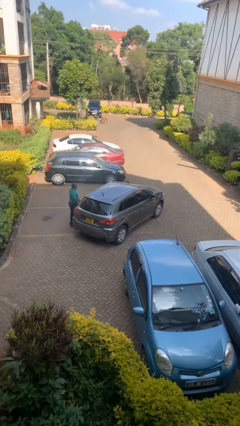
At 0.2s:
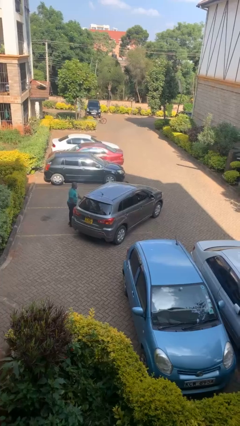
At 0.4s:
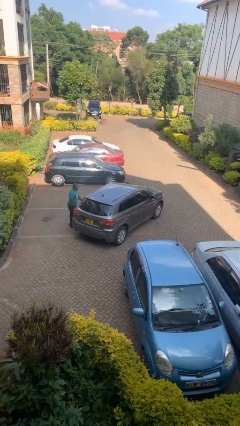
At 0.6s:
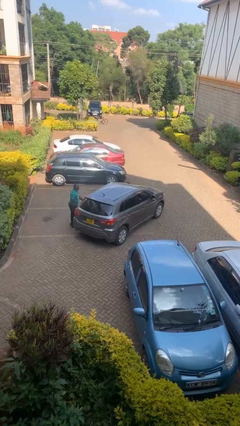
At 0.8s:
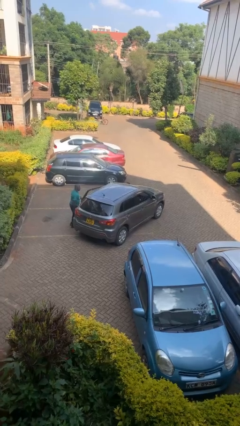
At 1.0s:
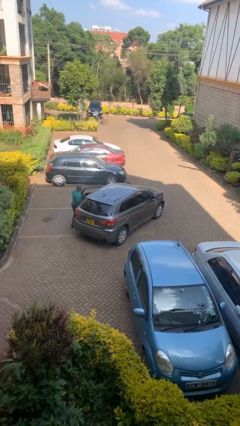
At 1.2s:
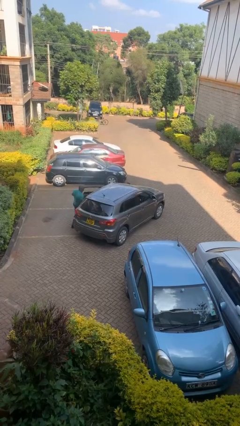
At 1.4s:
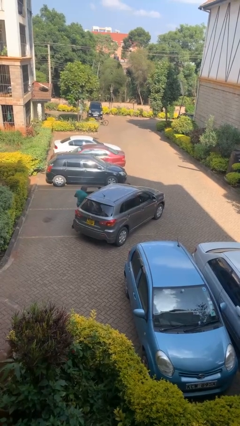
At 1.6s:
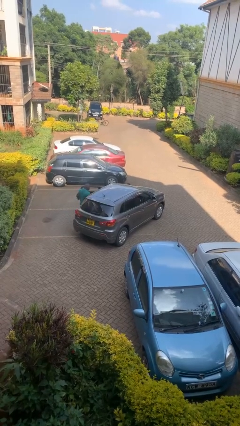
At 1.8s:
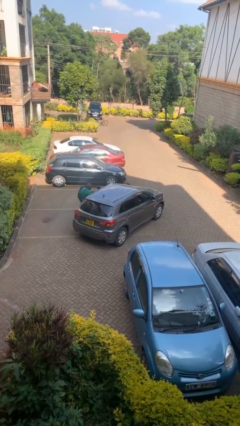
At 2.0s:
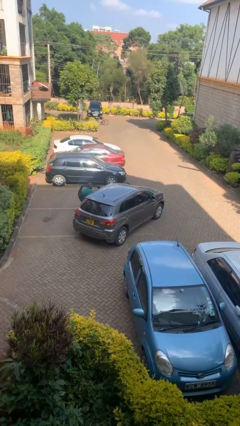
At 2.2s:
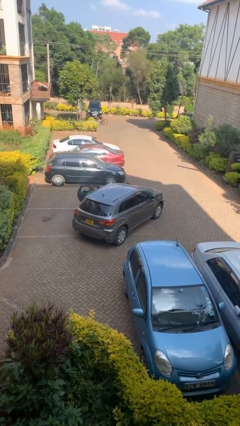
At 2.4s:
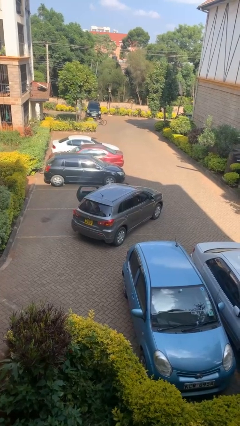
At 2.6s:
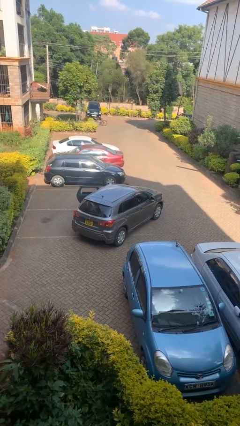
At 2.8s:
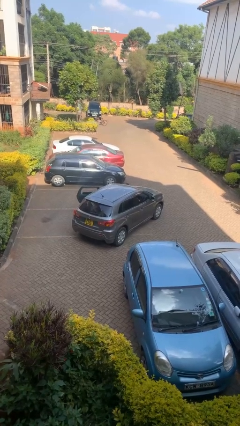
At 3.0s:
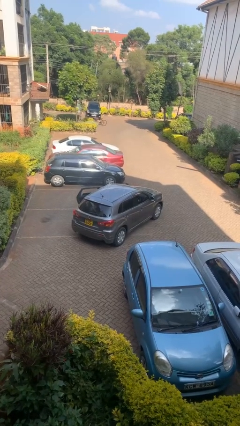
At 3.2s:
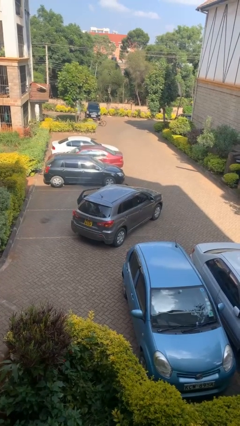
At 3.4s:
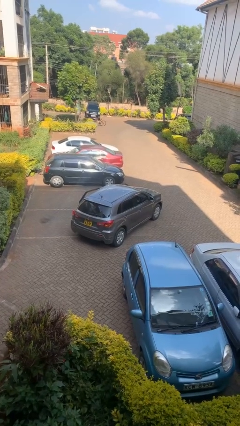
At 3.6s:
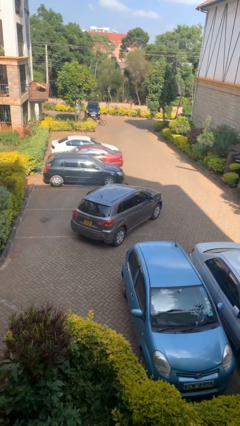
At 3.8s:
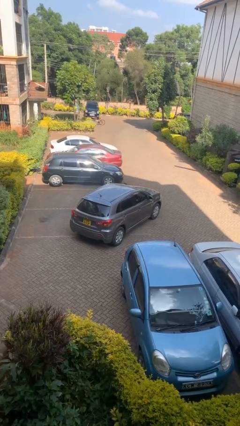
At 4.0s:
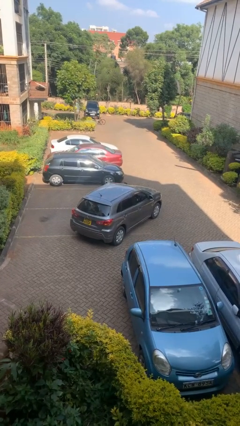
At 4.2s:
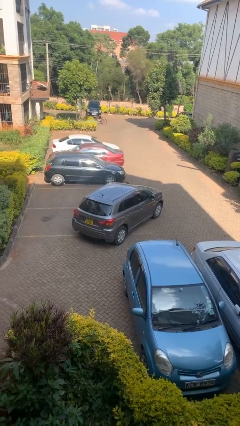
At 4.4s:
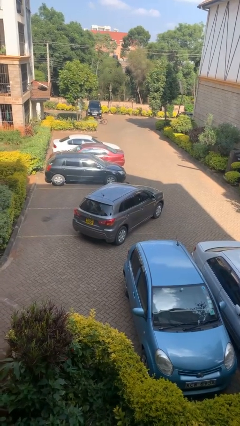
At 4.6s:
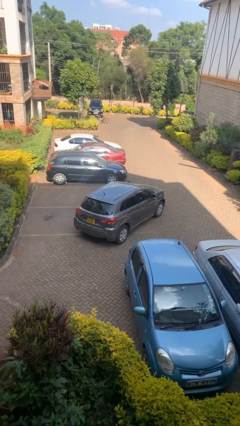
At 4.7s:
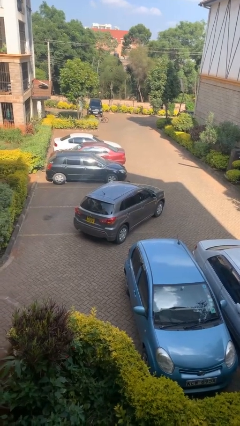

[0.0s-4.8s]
car picks up person

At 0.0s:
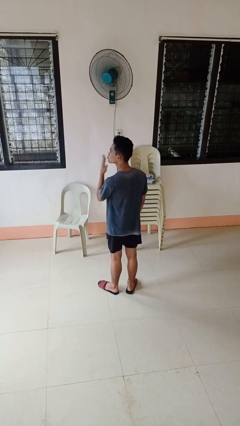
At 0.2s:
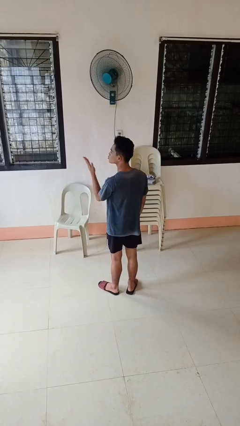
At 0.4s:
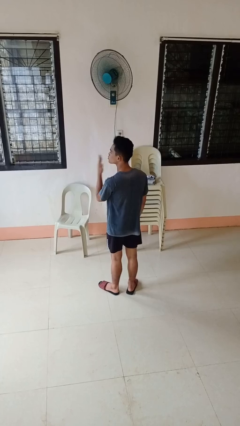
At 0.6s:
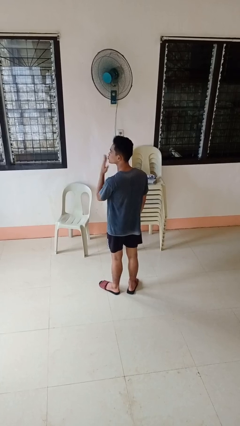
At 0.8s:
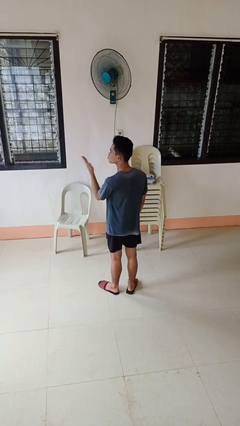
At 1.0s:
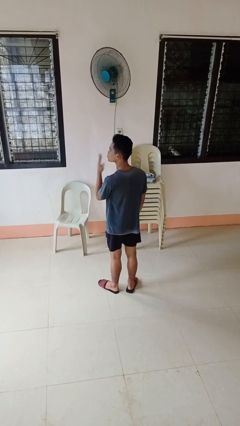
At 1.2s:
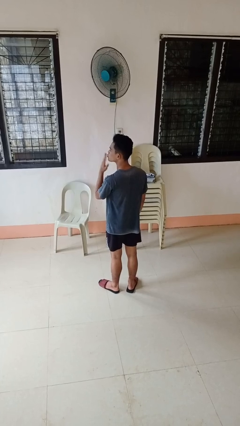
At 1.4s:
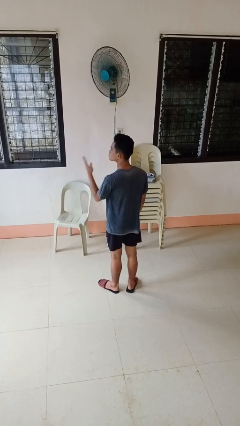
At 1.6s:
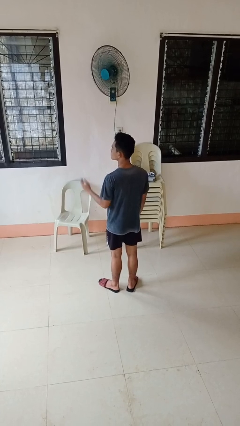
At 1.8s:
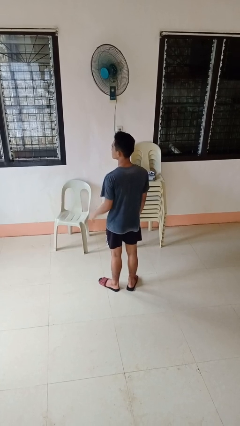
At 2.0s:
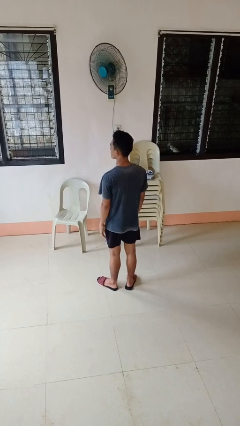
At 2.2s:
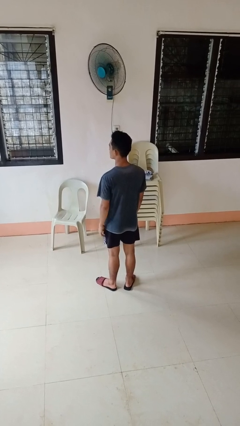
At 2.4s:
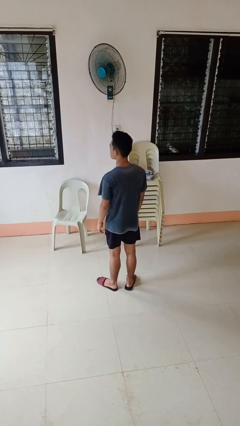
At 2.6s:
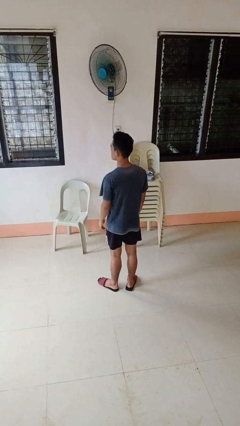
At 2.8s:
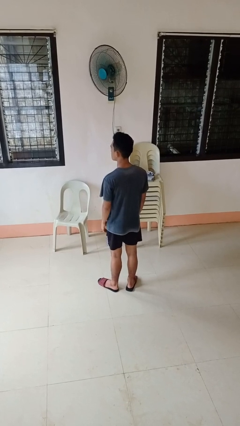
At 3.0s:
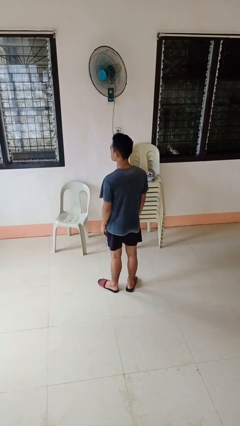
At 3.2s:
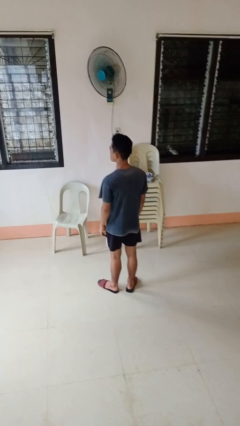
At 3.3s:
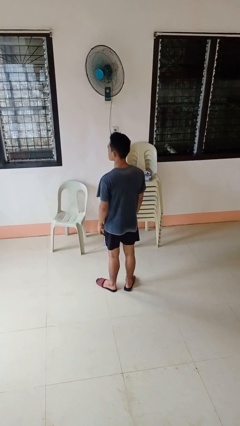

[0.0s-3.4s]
person gestures blow kiss

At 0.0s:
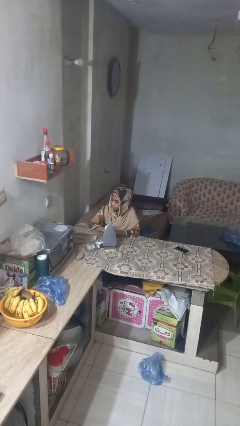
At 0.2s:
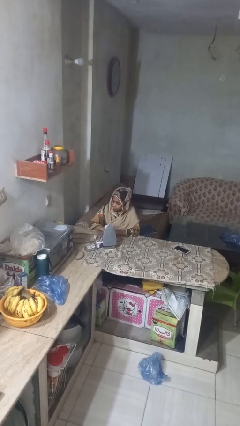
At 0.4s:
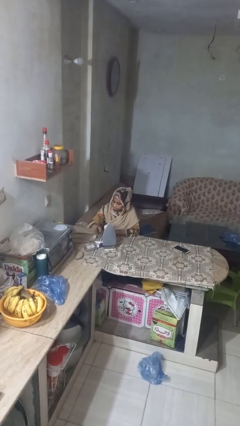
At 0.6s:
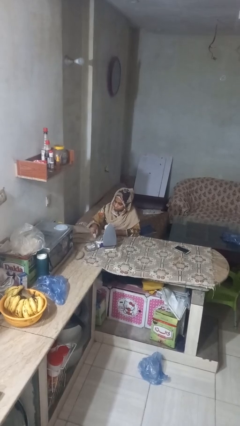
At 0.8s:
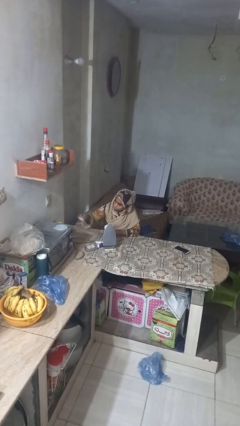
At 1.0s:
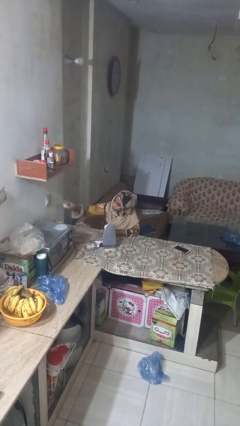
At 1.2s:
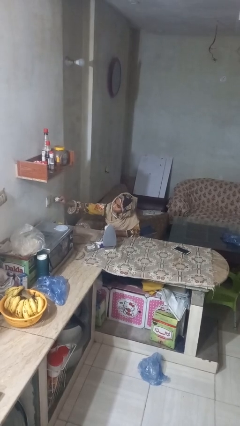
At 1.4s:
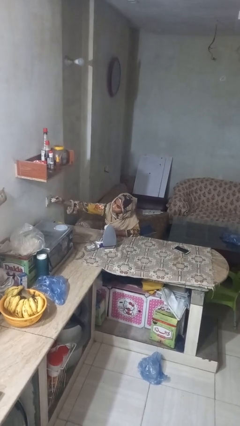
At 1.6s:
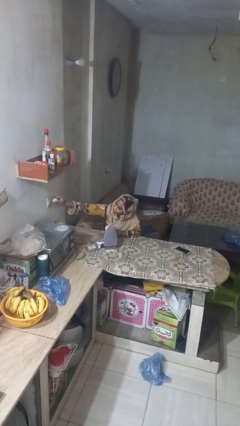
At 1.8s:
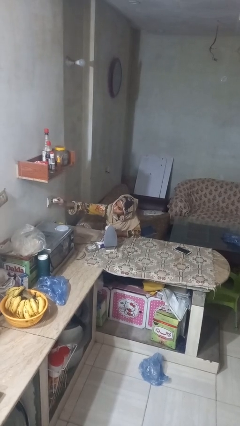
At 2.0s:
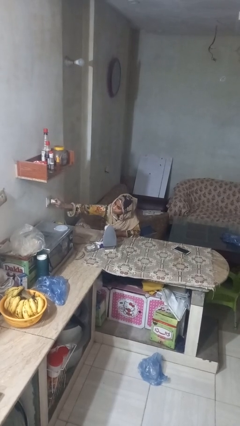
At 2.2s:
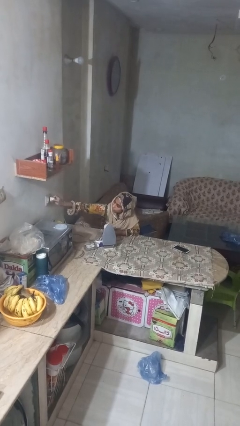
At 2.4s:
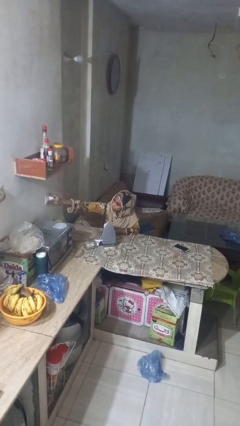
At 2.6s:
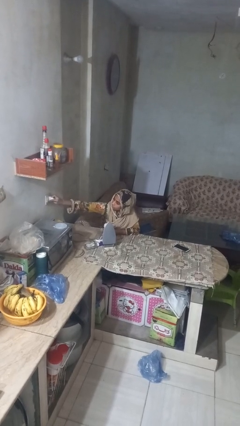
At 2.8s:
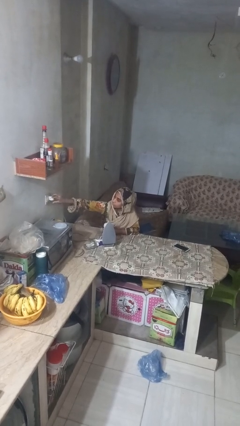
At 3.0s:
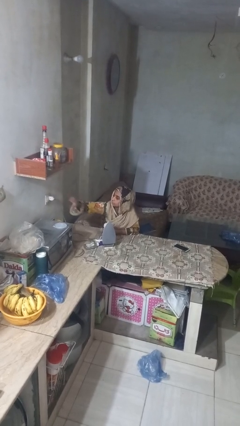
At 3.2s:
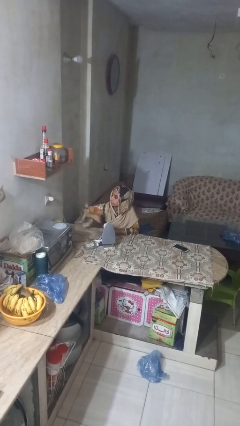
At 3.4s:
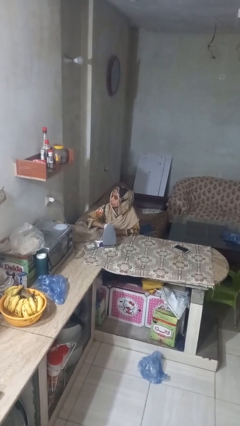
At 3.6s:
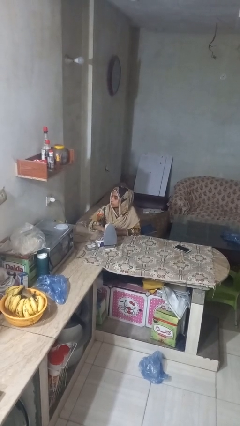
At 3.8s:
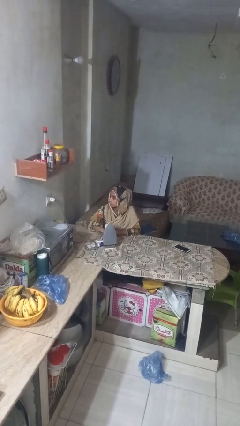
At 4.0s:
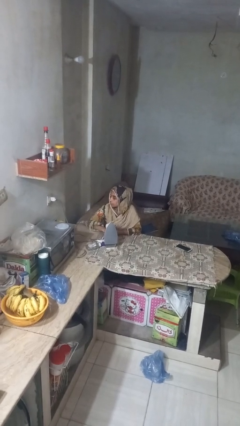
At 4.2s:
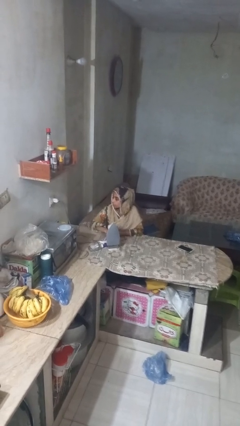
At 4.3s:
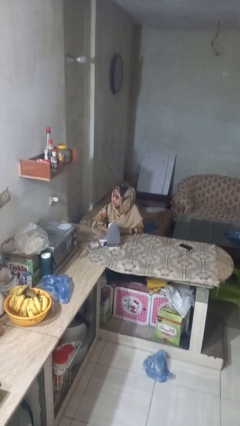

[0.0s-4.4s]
person plugs into electrical socket

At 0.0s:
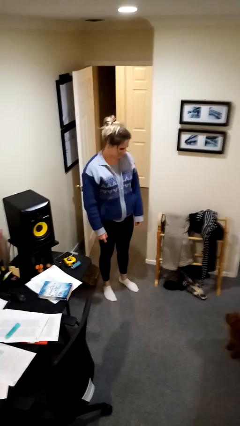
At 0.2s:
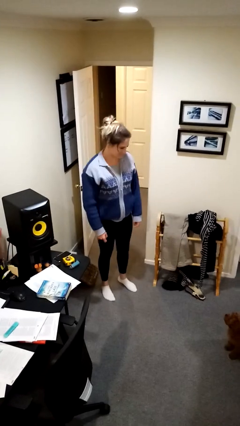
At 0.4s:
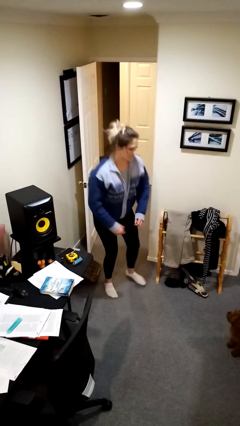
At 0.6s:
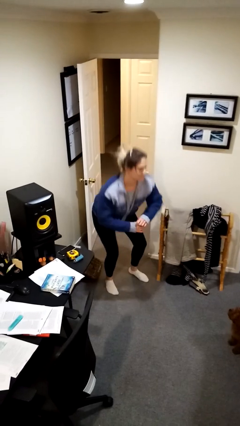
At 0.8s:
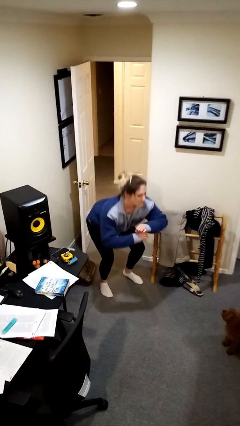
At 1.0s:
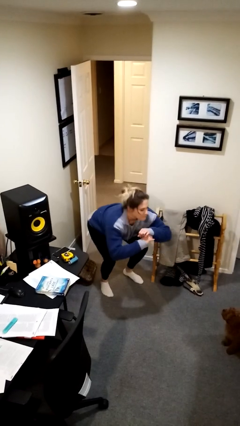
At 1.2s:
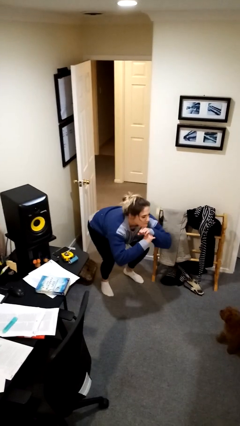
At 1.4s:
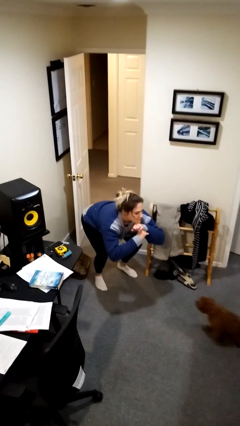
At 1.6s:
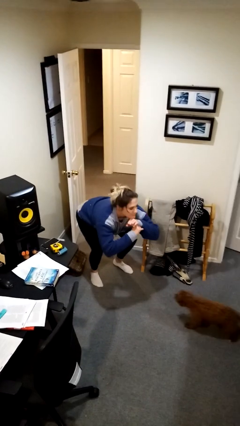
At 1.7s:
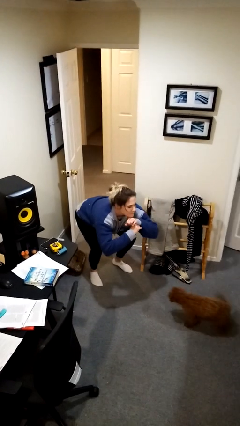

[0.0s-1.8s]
person squats

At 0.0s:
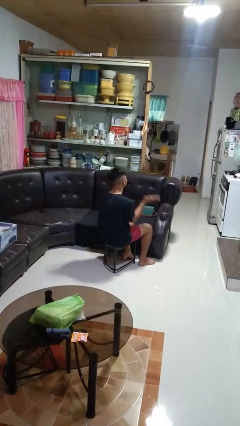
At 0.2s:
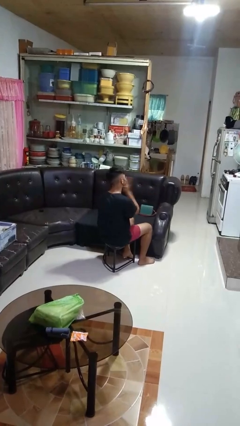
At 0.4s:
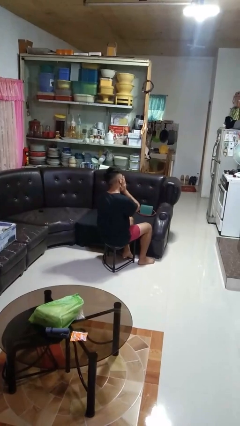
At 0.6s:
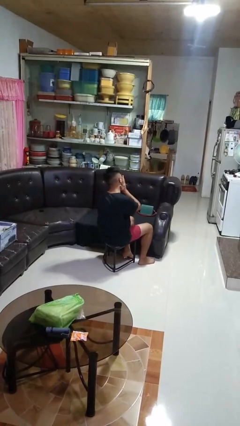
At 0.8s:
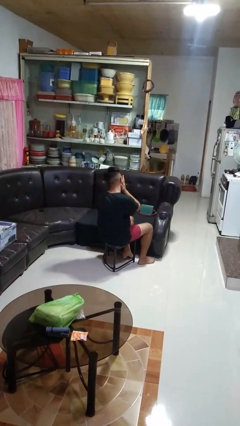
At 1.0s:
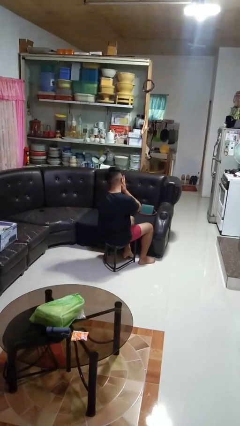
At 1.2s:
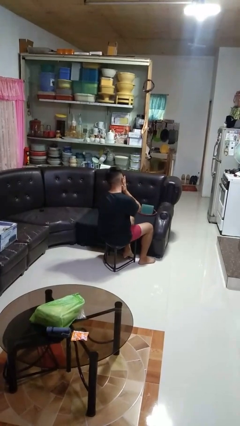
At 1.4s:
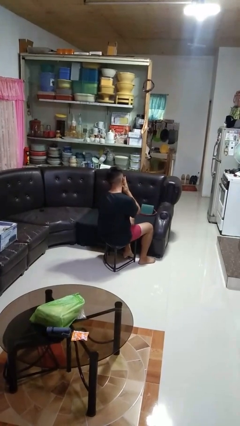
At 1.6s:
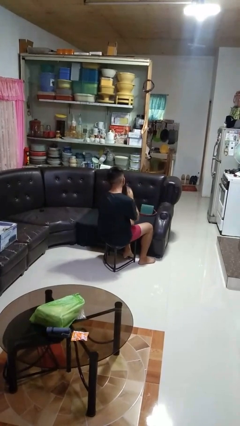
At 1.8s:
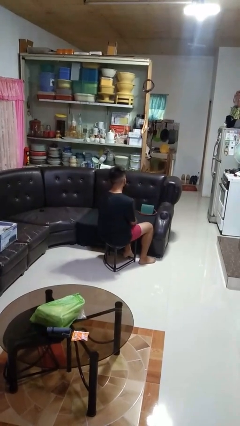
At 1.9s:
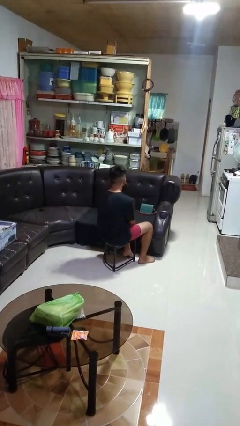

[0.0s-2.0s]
person swats bug

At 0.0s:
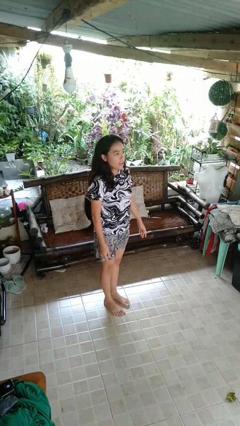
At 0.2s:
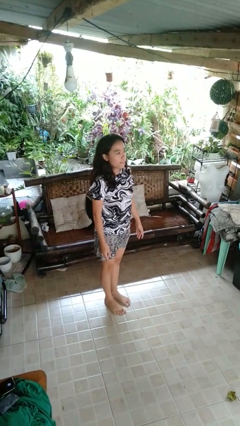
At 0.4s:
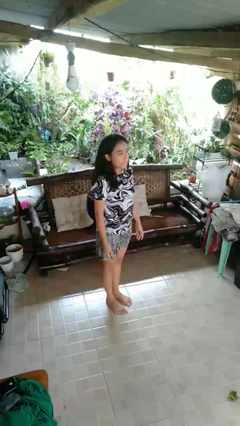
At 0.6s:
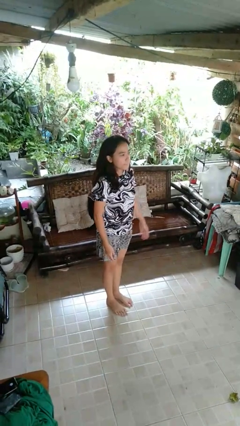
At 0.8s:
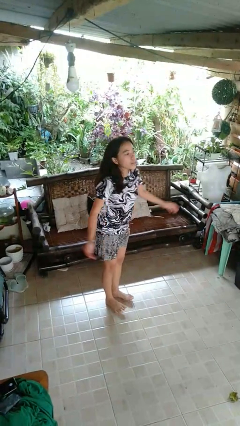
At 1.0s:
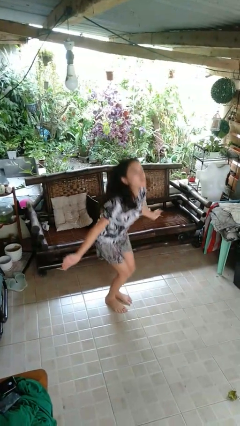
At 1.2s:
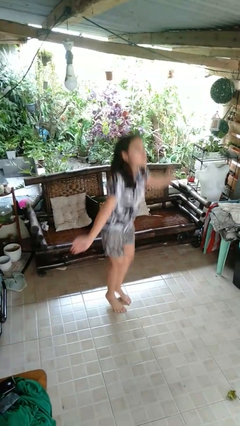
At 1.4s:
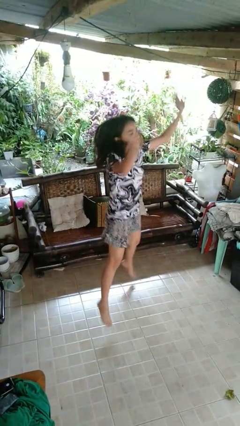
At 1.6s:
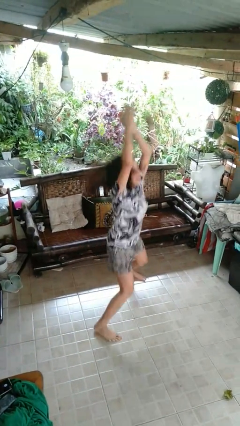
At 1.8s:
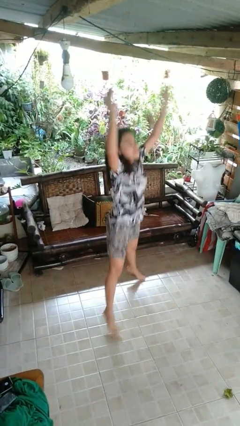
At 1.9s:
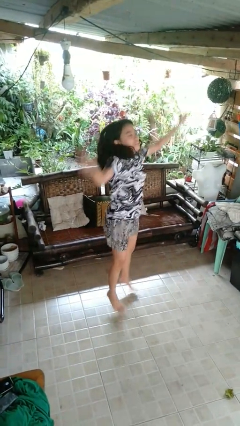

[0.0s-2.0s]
person exercises with jumping jacks
